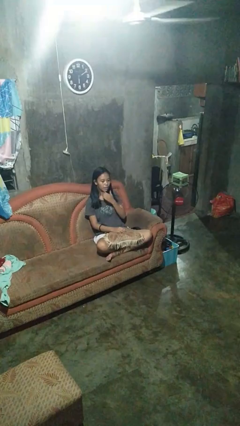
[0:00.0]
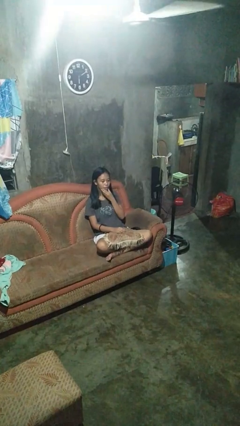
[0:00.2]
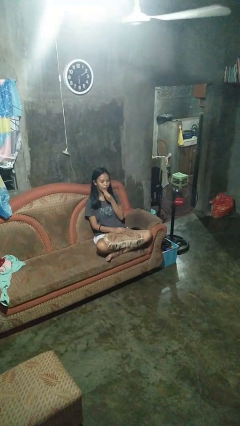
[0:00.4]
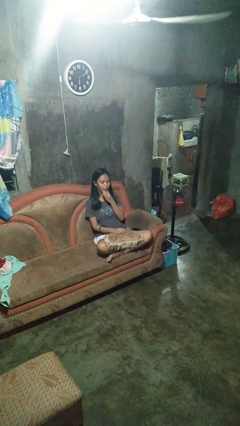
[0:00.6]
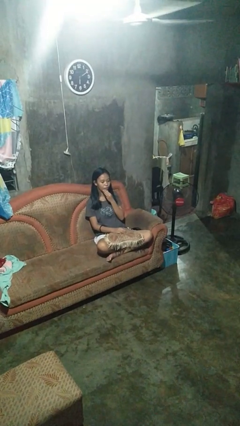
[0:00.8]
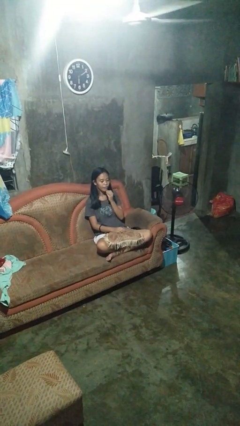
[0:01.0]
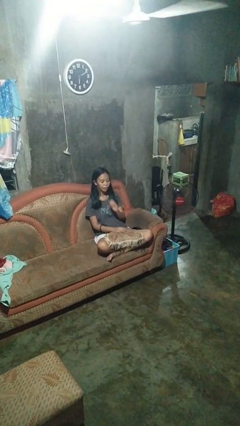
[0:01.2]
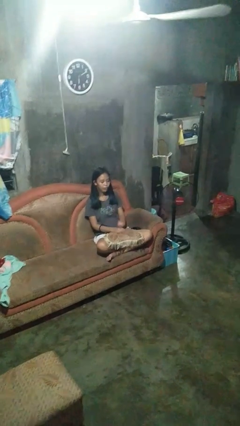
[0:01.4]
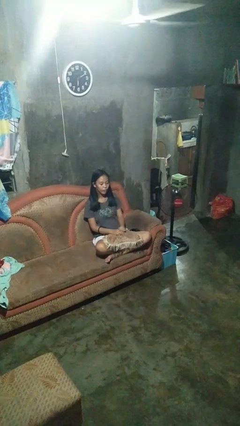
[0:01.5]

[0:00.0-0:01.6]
person strokes chin

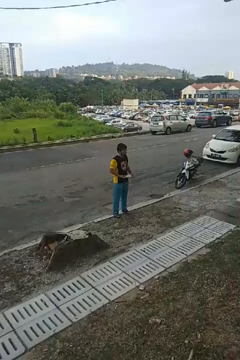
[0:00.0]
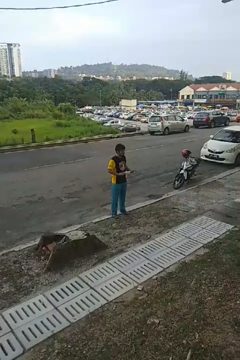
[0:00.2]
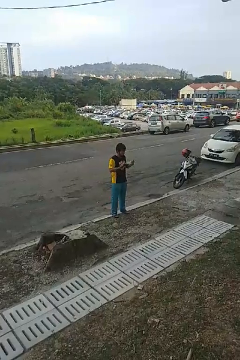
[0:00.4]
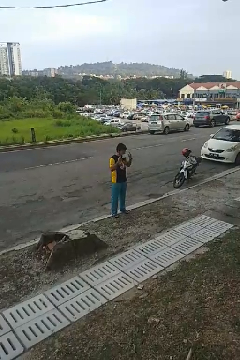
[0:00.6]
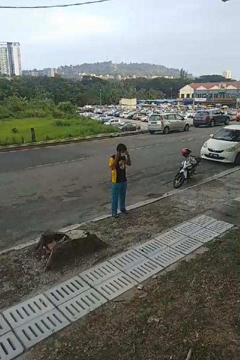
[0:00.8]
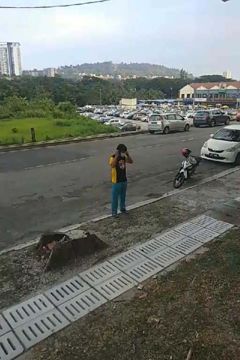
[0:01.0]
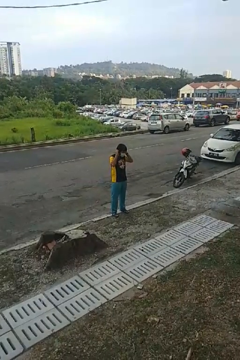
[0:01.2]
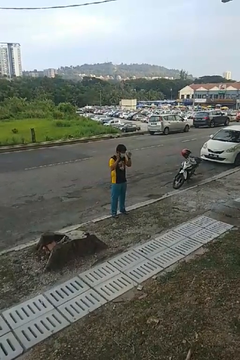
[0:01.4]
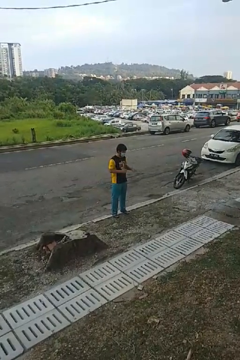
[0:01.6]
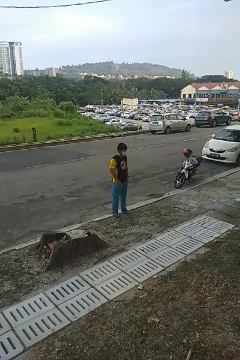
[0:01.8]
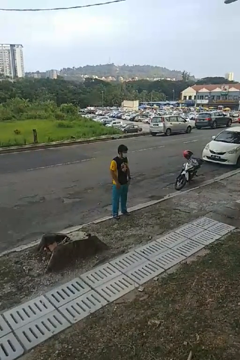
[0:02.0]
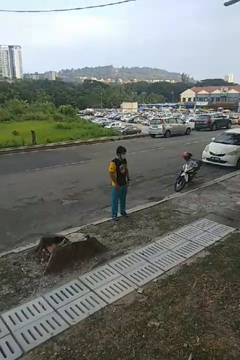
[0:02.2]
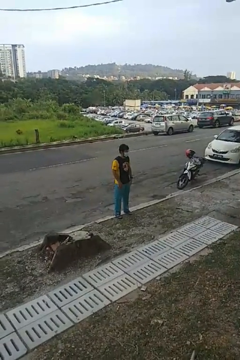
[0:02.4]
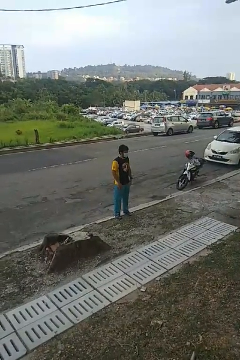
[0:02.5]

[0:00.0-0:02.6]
person puts on facemask

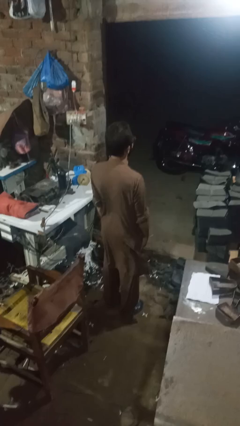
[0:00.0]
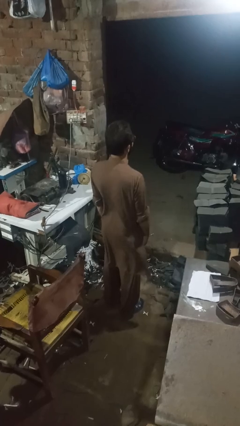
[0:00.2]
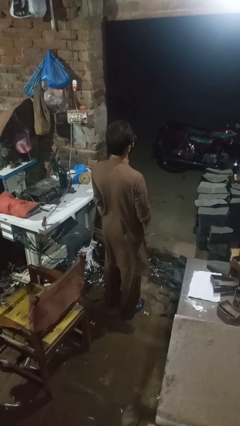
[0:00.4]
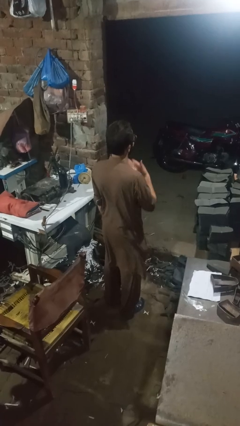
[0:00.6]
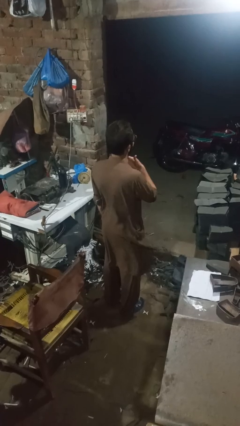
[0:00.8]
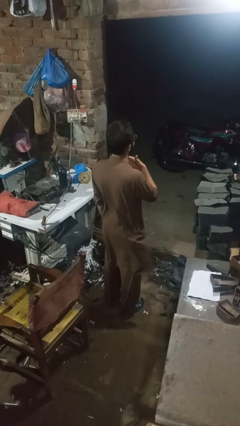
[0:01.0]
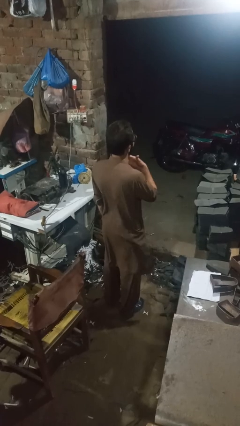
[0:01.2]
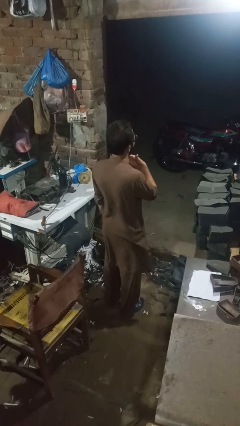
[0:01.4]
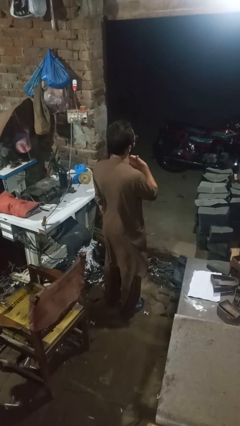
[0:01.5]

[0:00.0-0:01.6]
person rubs neck

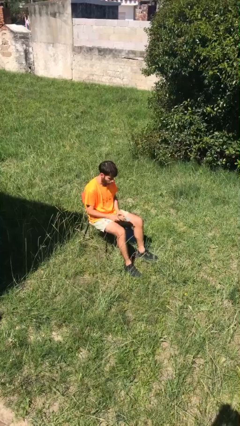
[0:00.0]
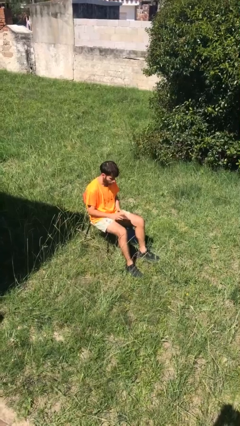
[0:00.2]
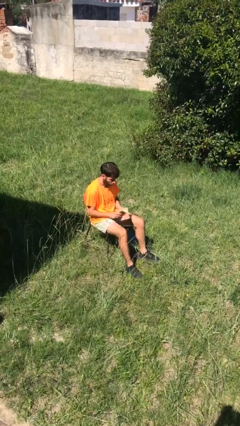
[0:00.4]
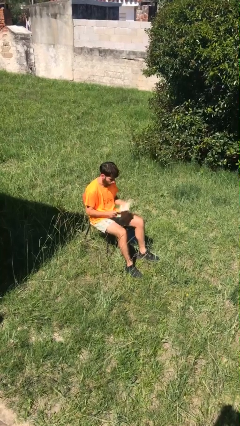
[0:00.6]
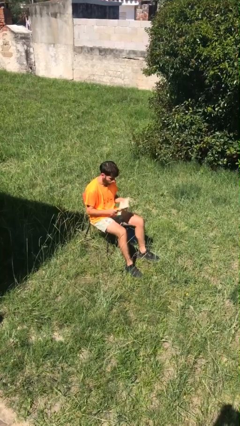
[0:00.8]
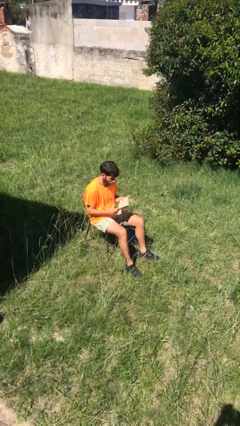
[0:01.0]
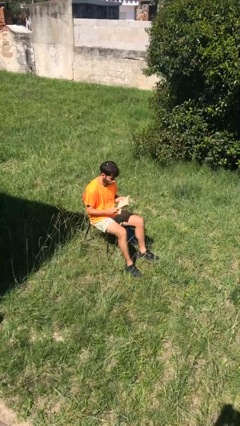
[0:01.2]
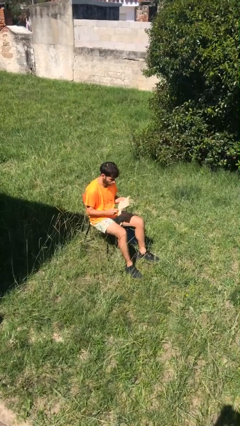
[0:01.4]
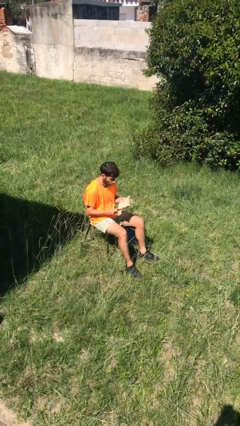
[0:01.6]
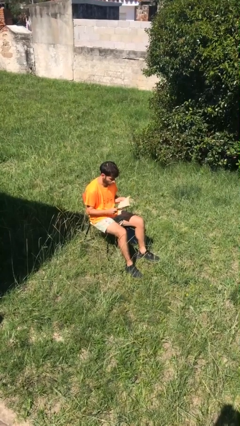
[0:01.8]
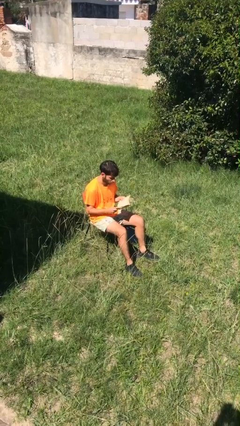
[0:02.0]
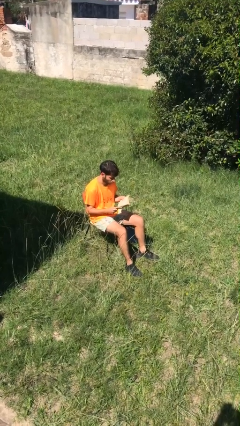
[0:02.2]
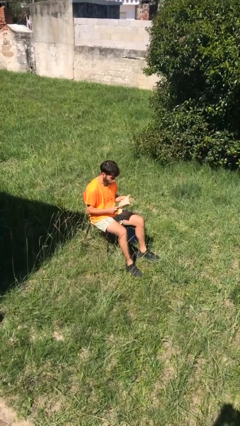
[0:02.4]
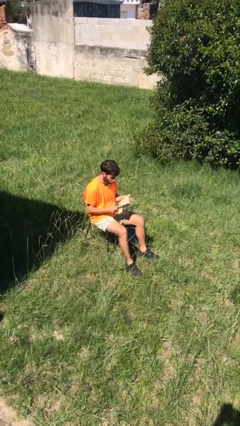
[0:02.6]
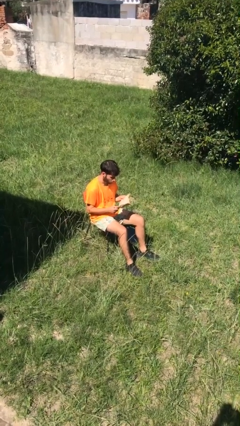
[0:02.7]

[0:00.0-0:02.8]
person reads document

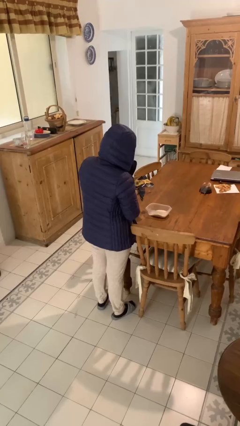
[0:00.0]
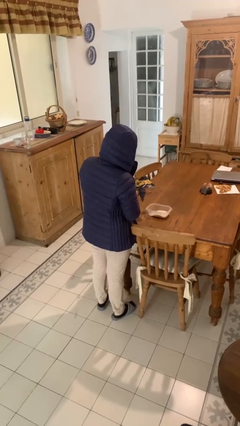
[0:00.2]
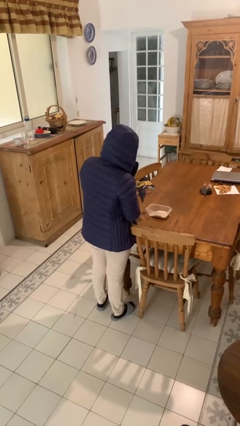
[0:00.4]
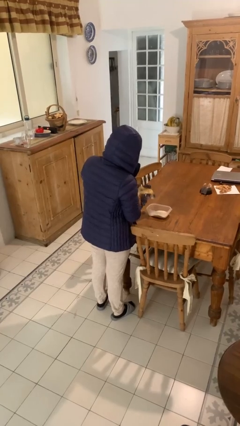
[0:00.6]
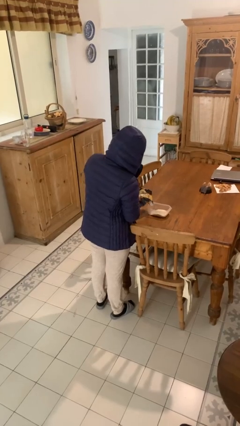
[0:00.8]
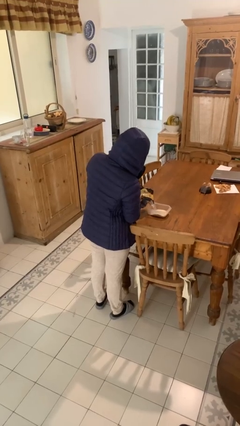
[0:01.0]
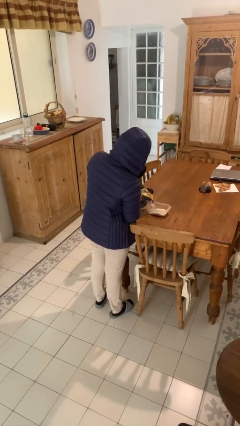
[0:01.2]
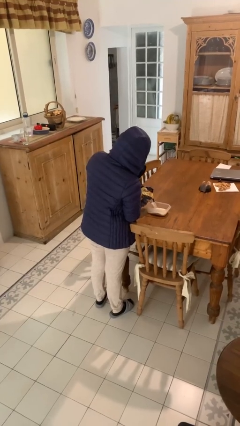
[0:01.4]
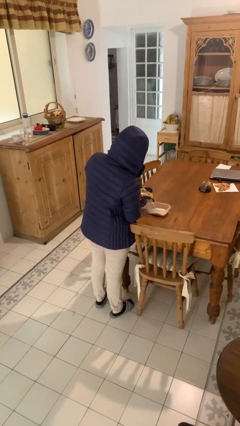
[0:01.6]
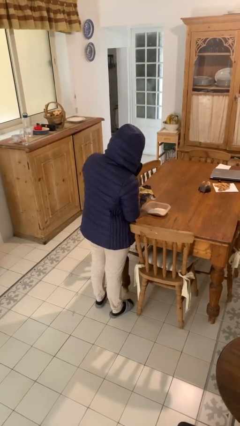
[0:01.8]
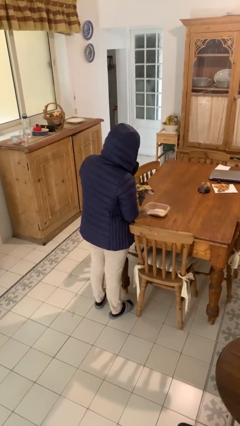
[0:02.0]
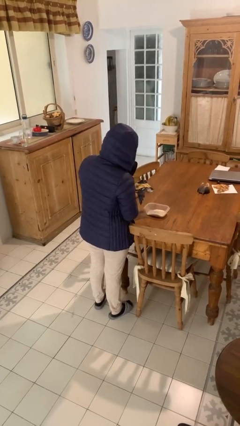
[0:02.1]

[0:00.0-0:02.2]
person pours into bowl

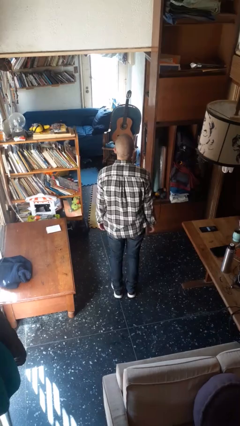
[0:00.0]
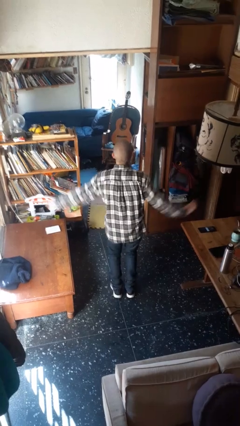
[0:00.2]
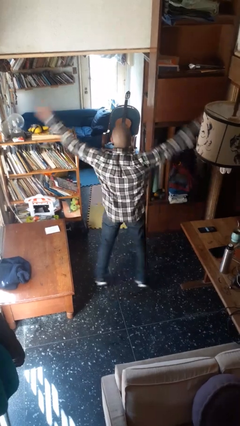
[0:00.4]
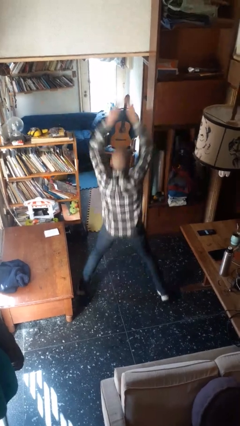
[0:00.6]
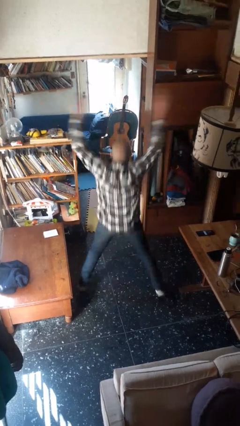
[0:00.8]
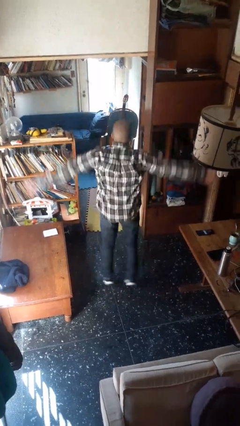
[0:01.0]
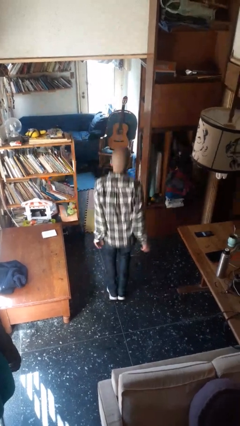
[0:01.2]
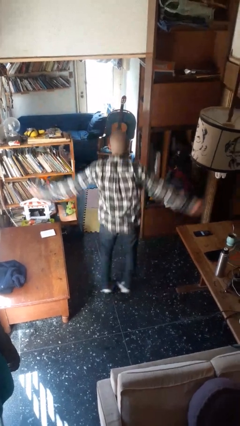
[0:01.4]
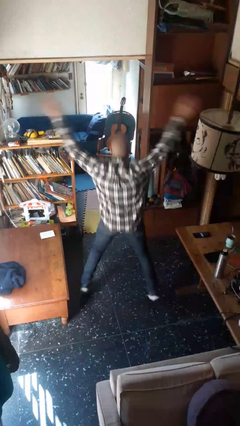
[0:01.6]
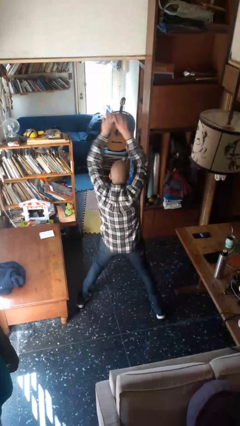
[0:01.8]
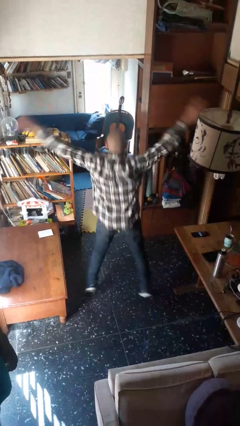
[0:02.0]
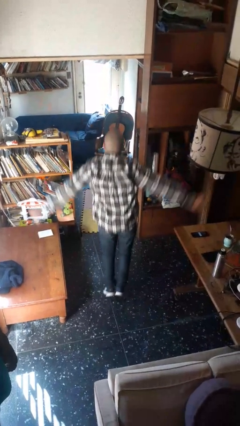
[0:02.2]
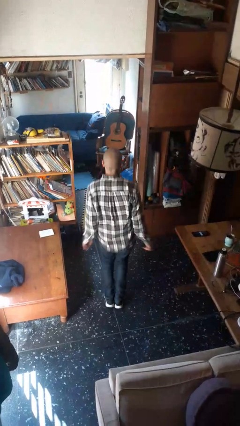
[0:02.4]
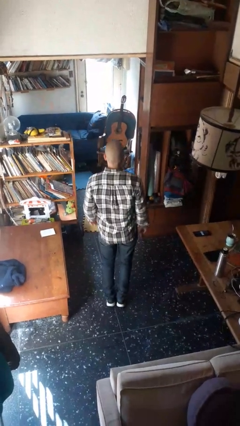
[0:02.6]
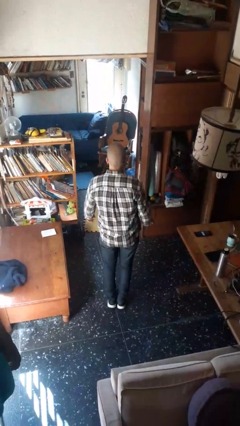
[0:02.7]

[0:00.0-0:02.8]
person exercises with jumping jacks

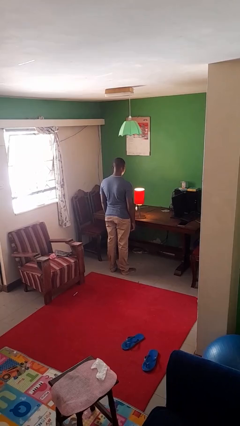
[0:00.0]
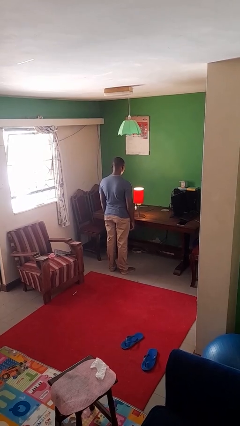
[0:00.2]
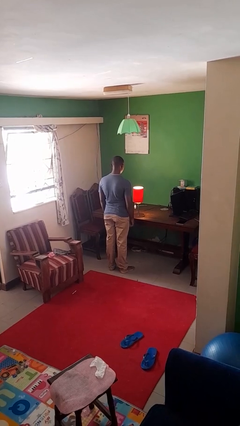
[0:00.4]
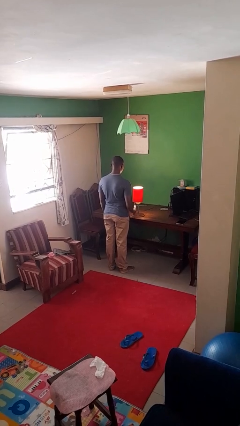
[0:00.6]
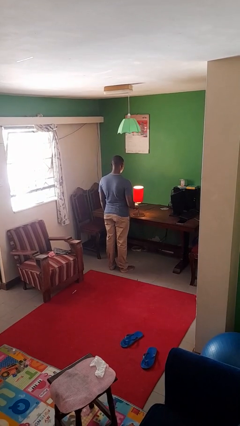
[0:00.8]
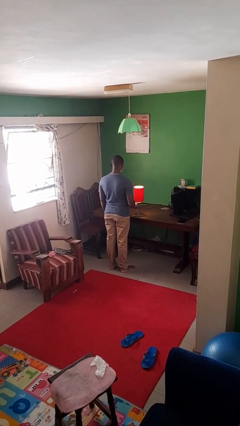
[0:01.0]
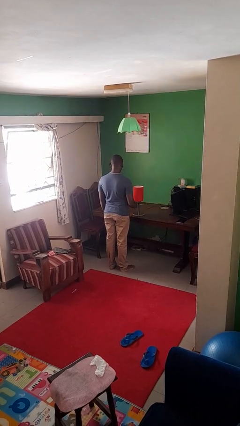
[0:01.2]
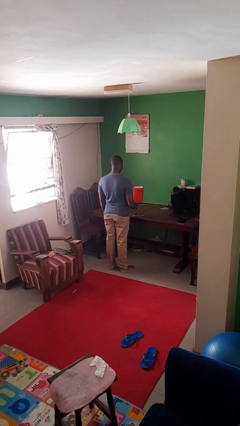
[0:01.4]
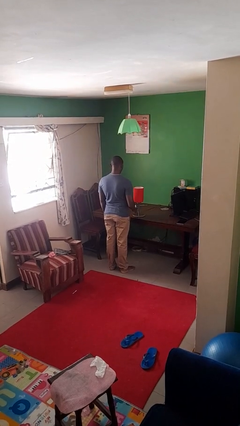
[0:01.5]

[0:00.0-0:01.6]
person turns off lamp

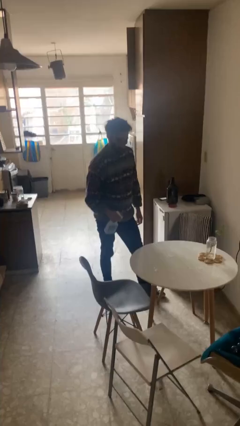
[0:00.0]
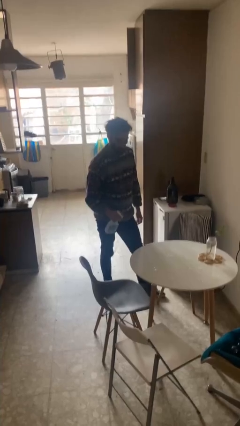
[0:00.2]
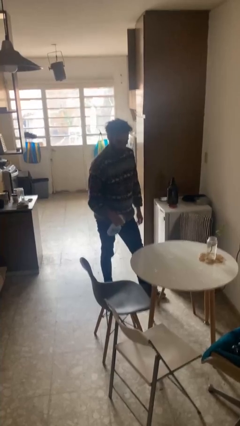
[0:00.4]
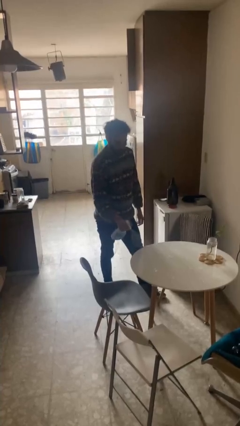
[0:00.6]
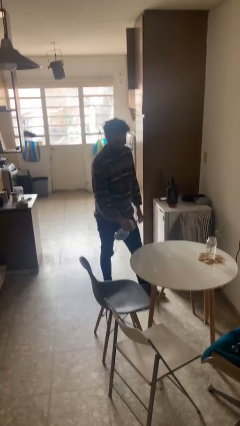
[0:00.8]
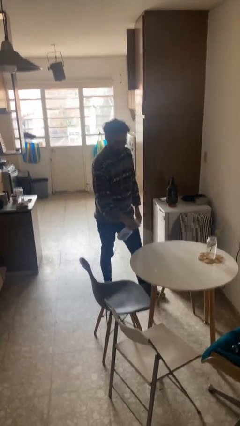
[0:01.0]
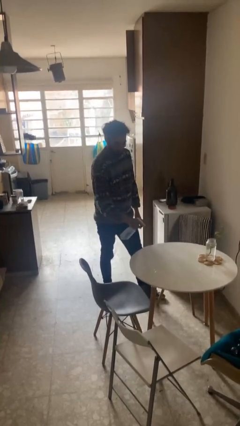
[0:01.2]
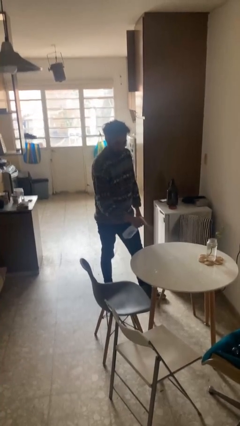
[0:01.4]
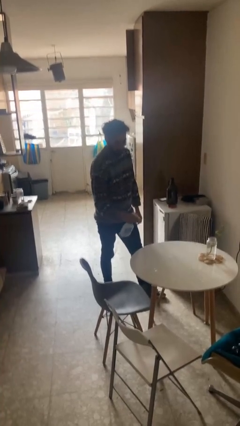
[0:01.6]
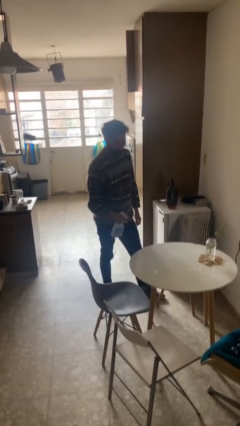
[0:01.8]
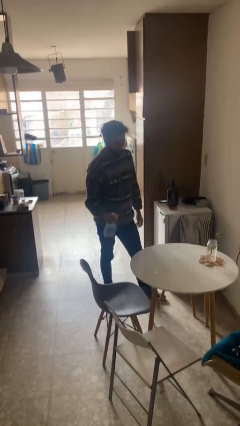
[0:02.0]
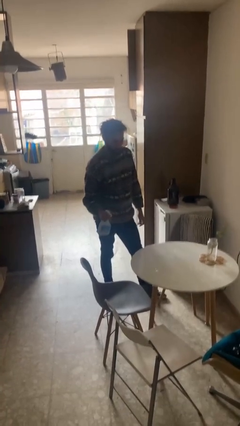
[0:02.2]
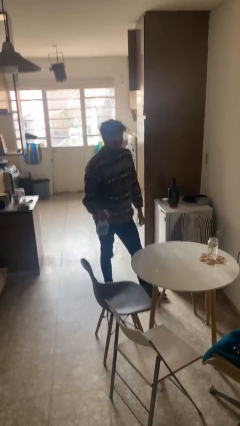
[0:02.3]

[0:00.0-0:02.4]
person sprays from bottle
